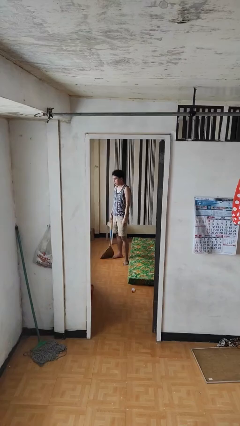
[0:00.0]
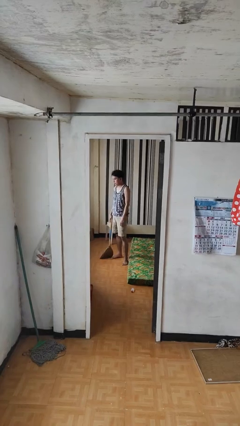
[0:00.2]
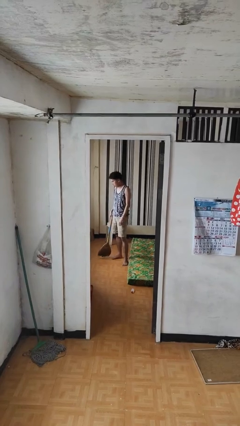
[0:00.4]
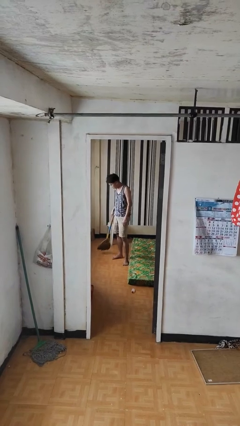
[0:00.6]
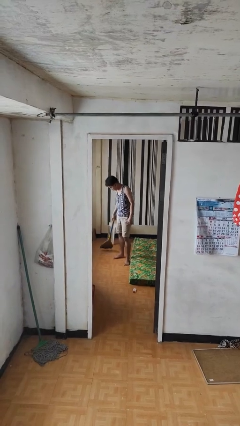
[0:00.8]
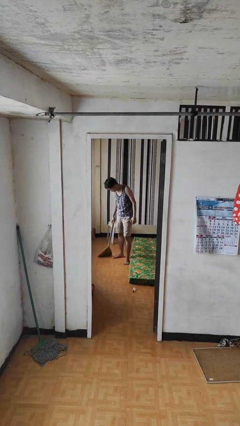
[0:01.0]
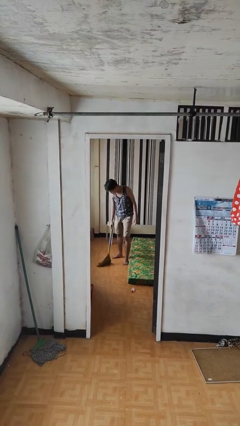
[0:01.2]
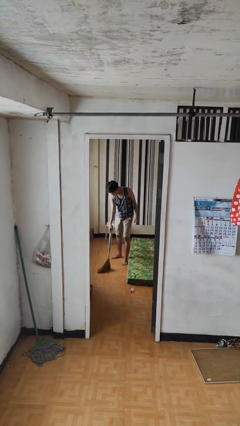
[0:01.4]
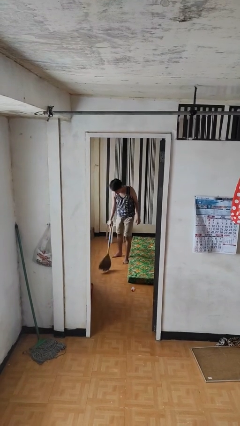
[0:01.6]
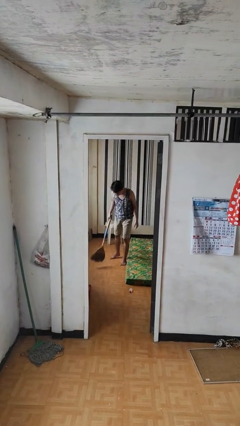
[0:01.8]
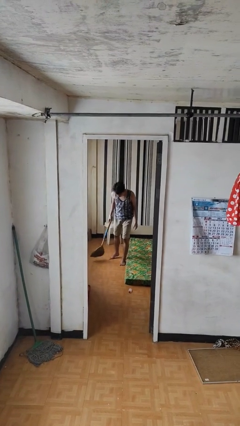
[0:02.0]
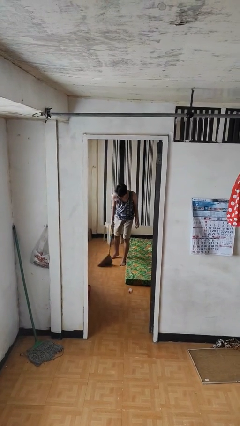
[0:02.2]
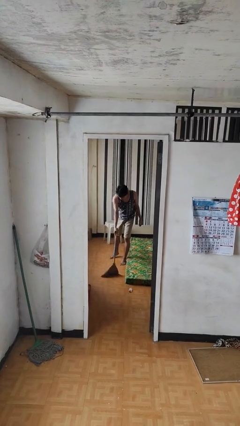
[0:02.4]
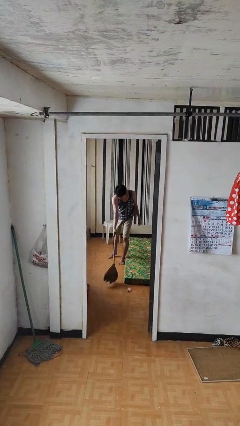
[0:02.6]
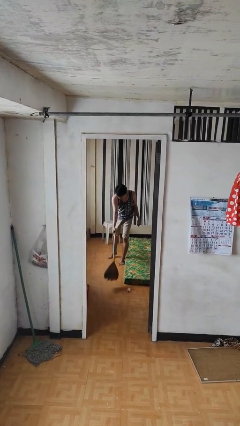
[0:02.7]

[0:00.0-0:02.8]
person sweeps floor

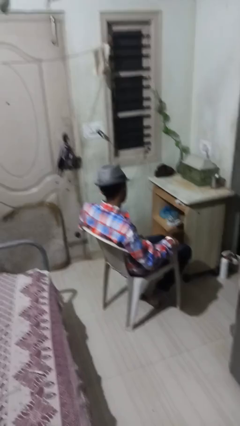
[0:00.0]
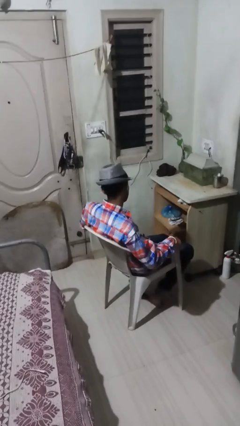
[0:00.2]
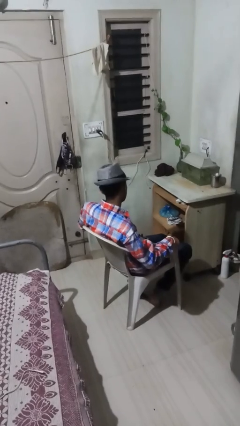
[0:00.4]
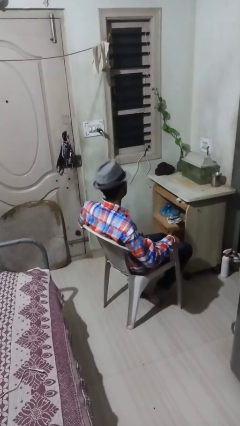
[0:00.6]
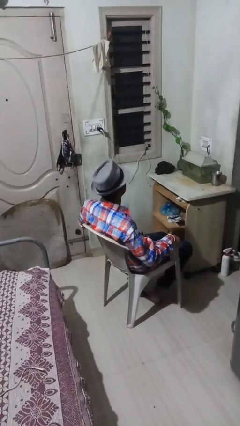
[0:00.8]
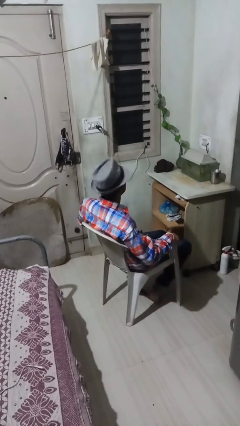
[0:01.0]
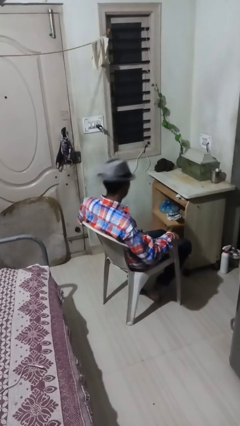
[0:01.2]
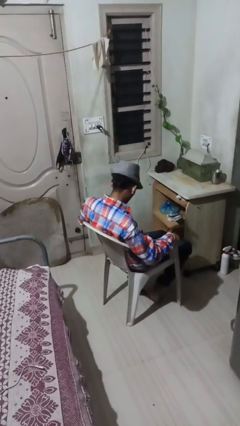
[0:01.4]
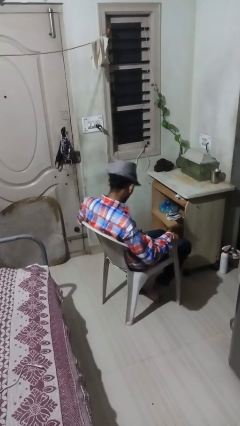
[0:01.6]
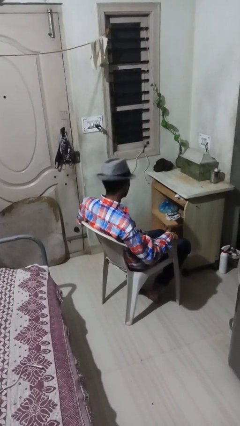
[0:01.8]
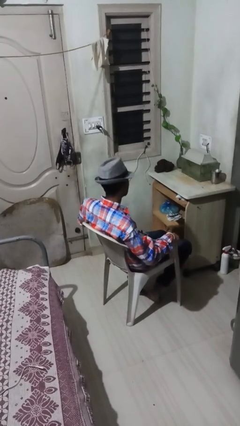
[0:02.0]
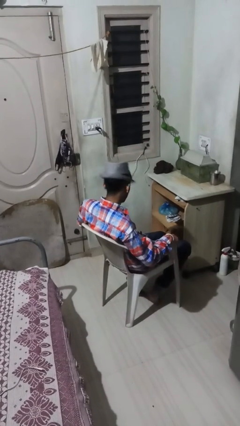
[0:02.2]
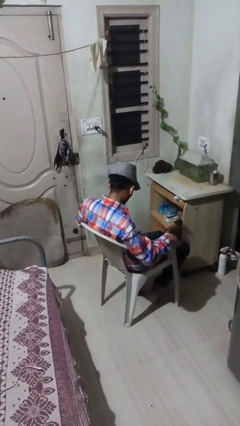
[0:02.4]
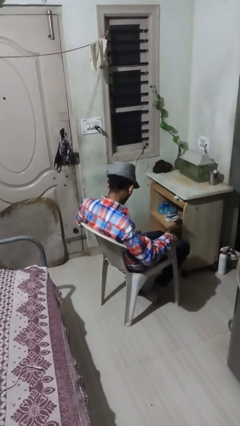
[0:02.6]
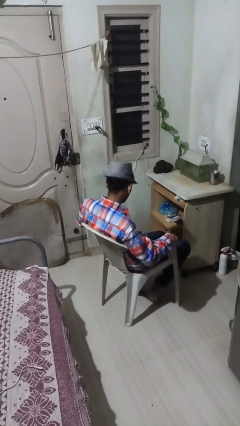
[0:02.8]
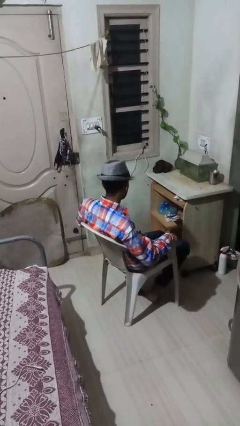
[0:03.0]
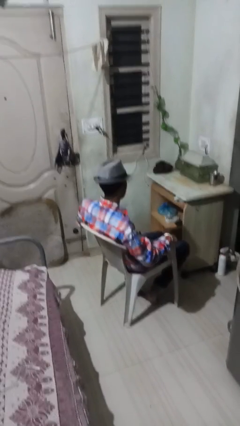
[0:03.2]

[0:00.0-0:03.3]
person nods head

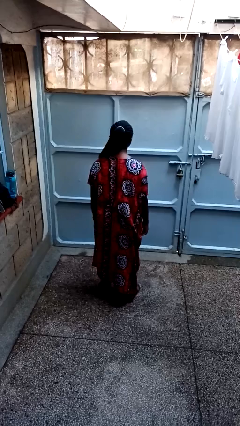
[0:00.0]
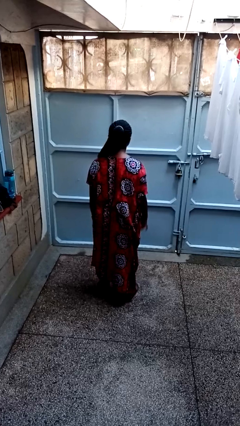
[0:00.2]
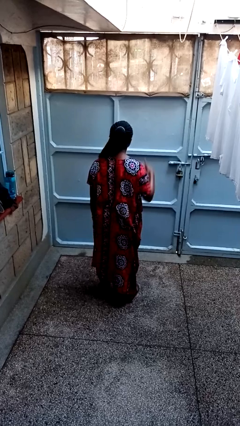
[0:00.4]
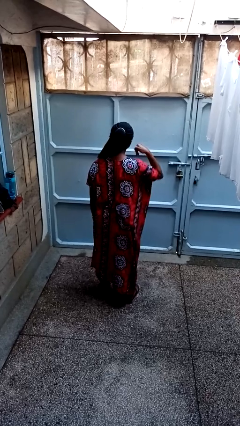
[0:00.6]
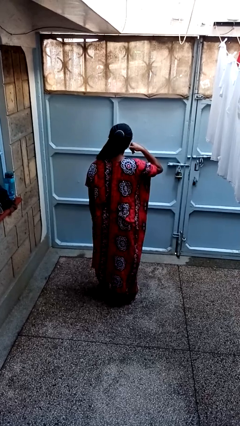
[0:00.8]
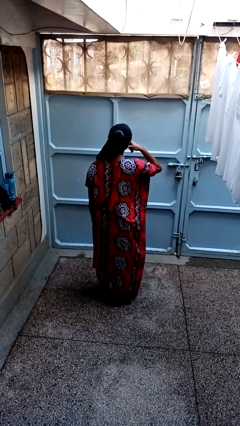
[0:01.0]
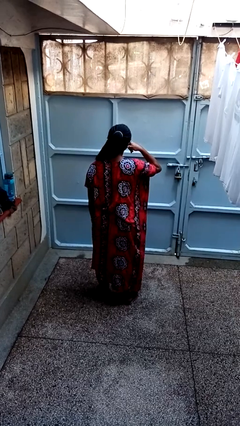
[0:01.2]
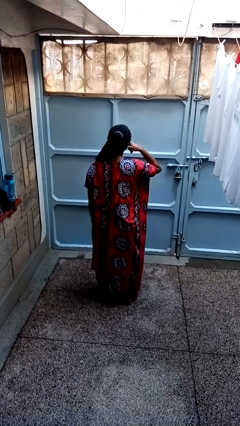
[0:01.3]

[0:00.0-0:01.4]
person gestures call me

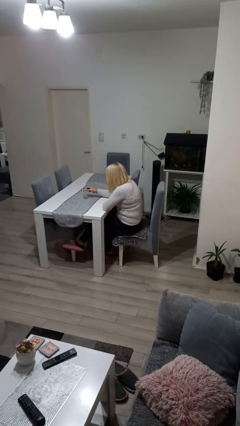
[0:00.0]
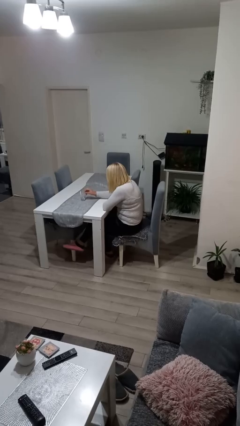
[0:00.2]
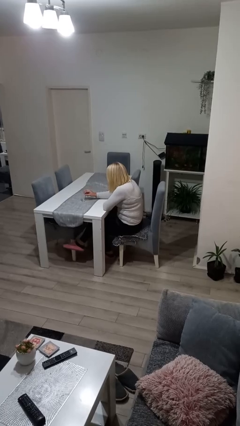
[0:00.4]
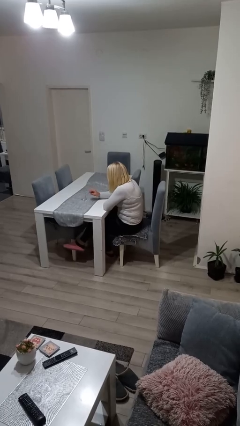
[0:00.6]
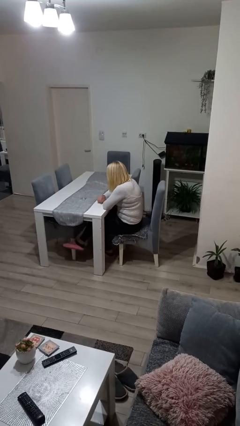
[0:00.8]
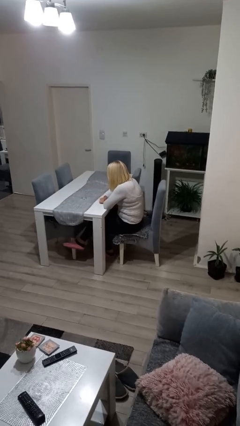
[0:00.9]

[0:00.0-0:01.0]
person sets upright glass

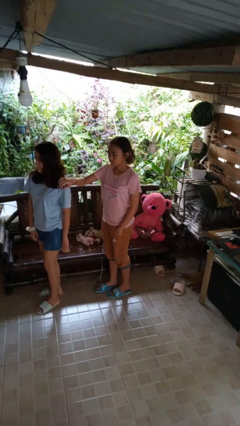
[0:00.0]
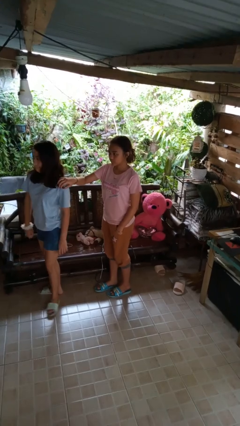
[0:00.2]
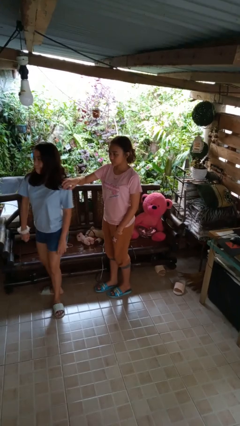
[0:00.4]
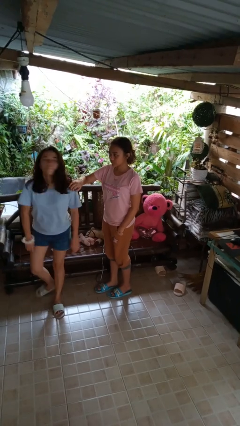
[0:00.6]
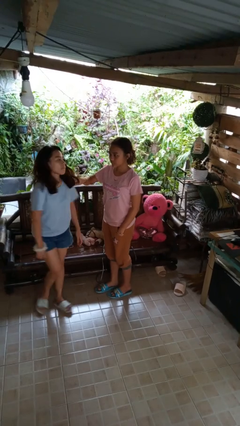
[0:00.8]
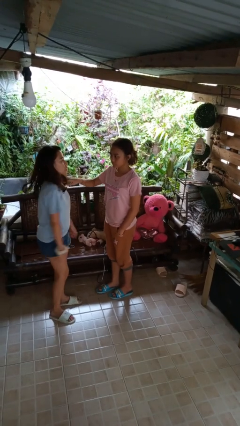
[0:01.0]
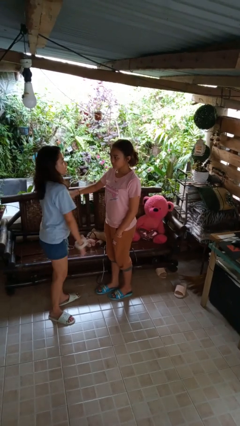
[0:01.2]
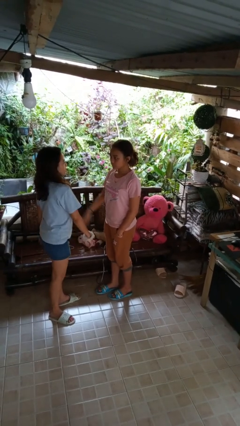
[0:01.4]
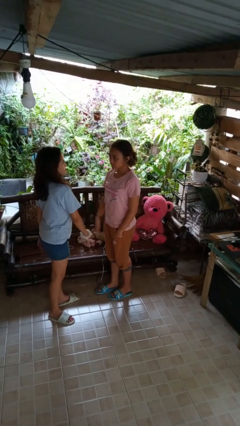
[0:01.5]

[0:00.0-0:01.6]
person spins person around

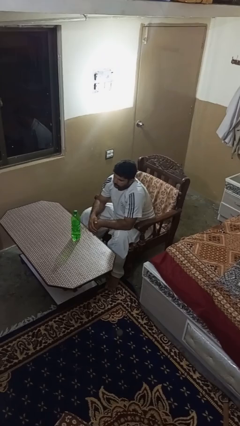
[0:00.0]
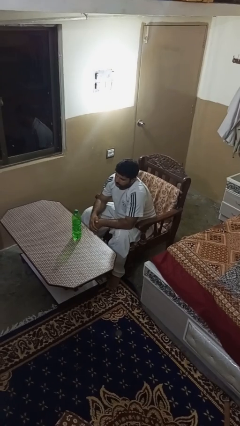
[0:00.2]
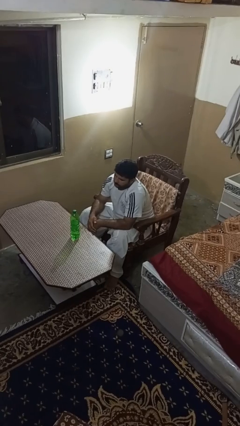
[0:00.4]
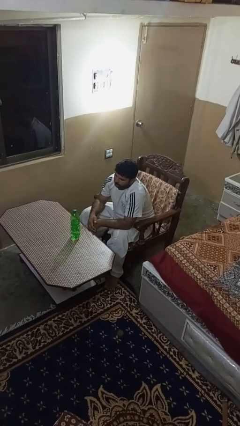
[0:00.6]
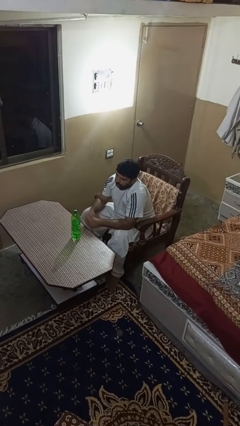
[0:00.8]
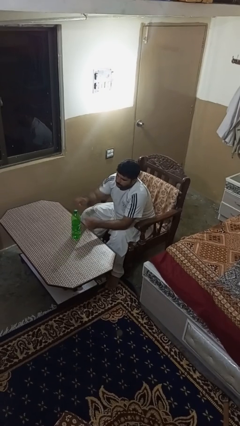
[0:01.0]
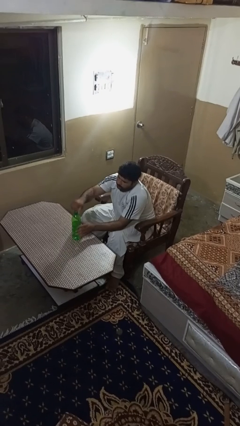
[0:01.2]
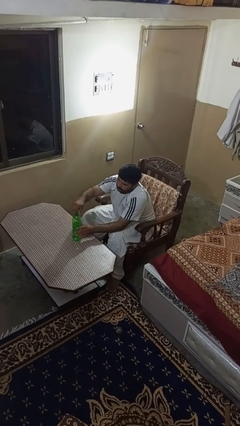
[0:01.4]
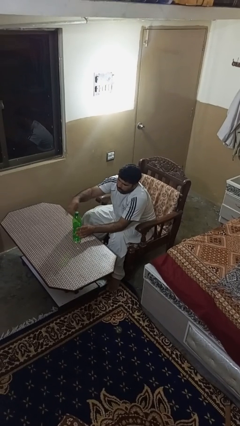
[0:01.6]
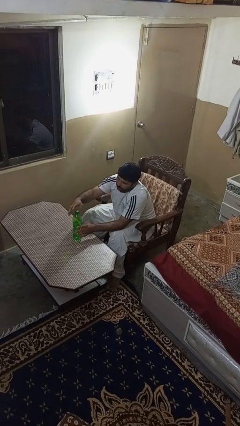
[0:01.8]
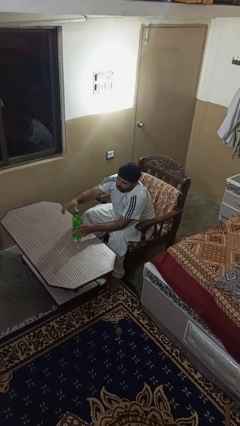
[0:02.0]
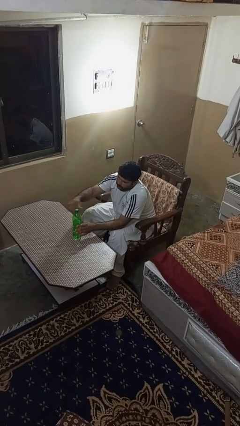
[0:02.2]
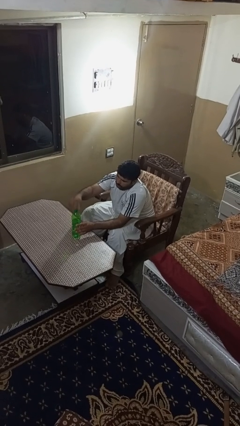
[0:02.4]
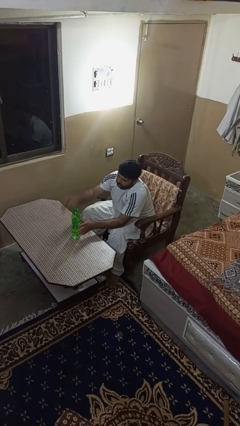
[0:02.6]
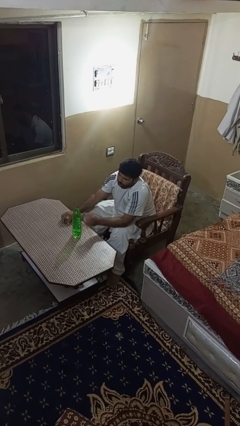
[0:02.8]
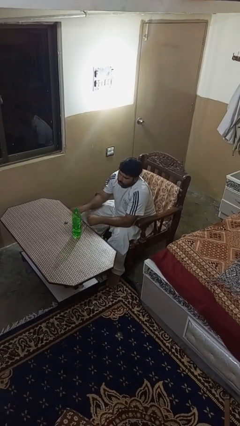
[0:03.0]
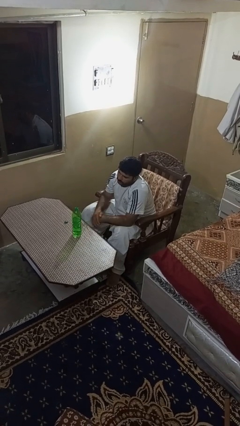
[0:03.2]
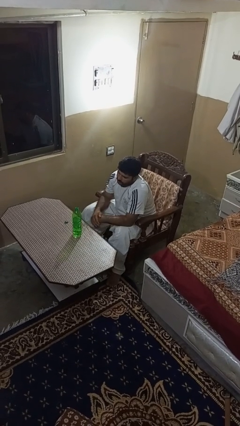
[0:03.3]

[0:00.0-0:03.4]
person unscrews lid from bottle

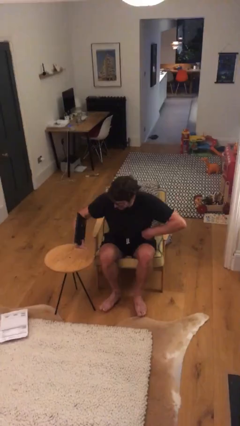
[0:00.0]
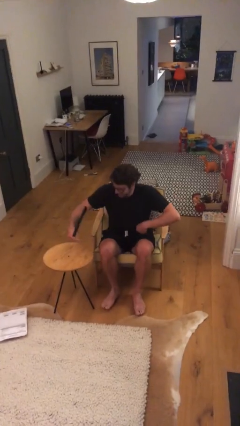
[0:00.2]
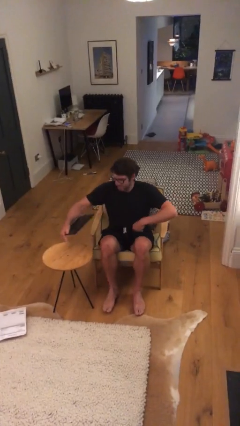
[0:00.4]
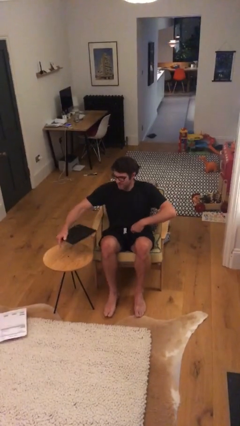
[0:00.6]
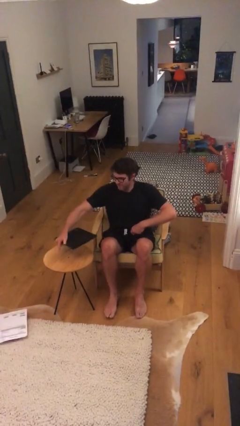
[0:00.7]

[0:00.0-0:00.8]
person sits down

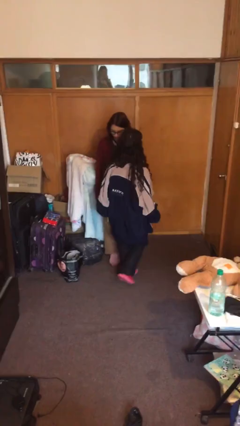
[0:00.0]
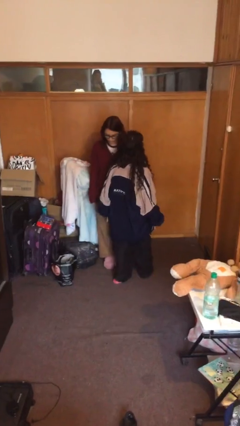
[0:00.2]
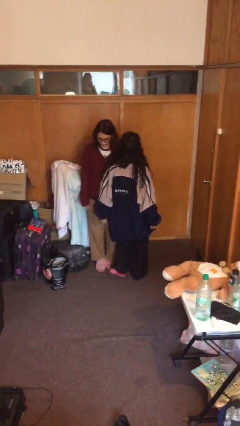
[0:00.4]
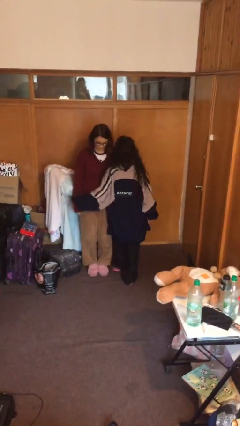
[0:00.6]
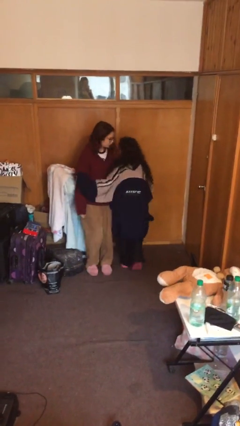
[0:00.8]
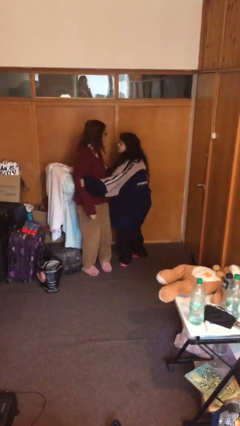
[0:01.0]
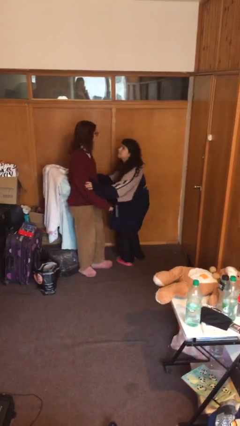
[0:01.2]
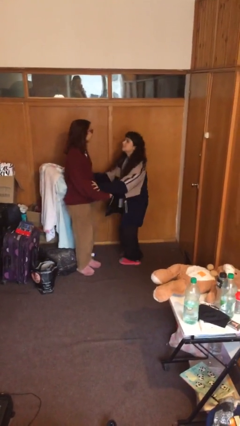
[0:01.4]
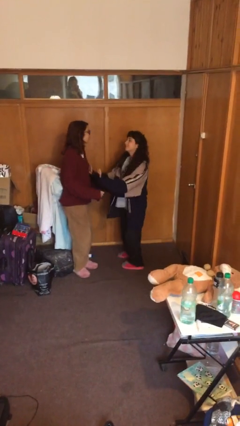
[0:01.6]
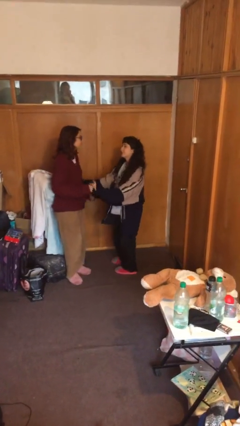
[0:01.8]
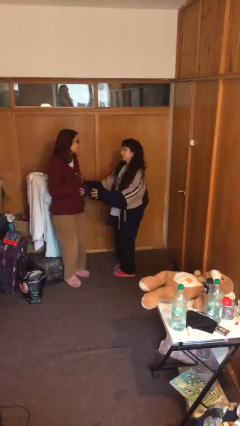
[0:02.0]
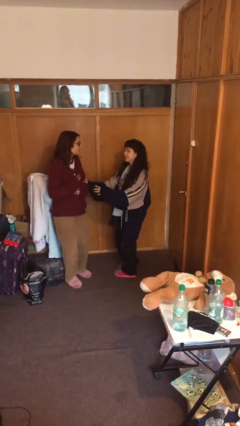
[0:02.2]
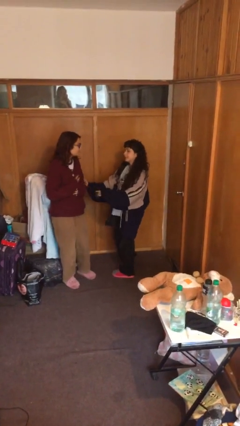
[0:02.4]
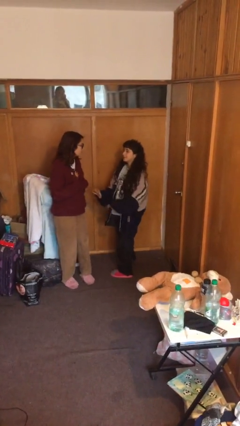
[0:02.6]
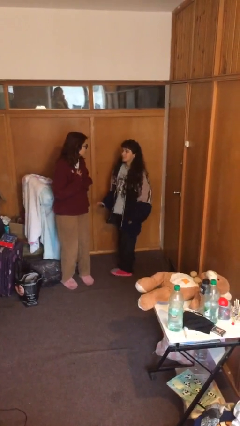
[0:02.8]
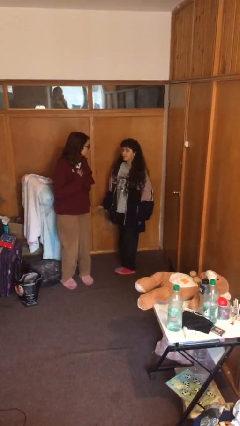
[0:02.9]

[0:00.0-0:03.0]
person bumps into person
